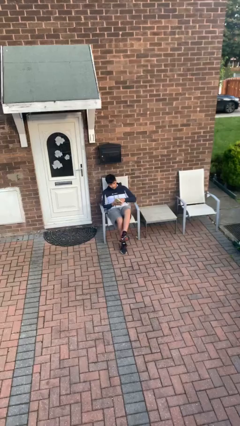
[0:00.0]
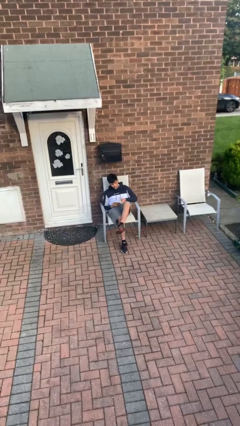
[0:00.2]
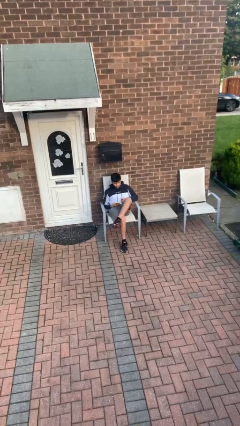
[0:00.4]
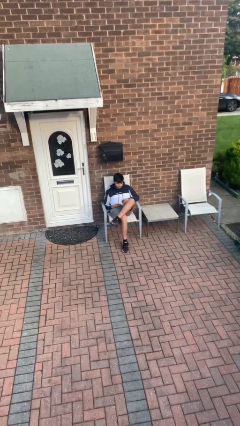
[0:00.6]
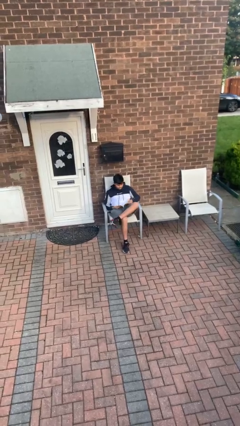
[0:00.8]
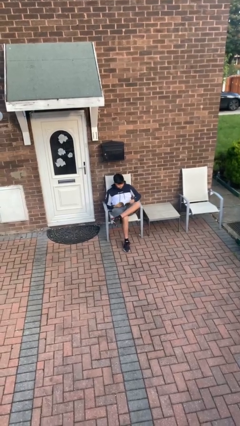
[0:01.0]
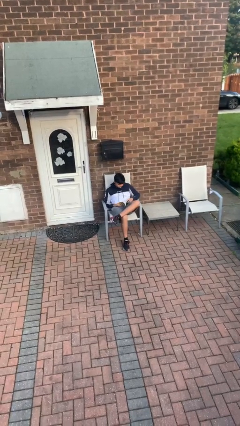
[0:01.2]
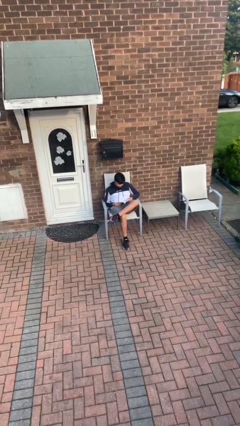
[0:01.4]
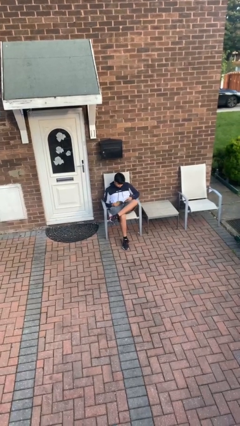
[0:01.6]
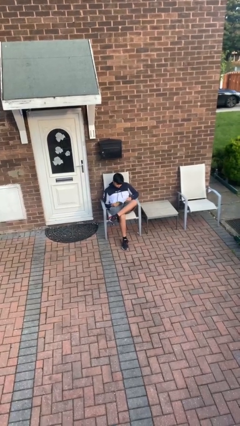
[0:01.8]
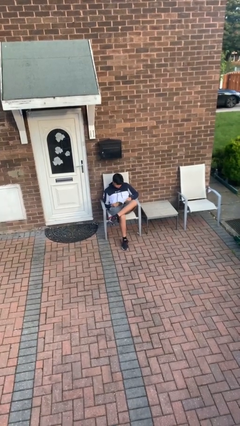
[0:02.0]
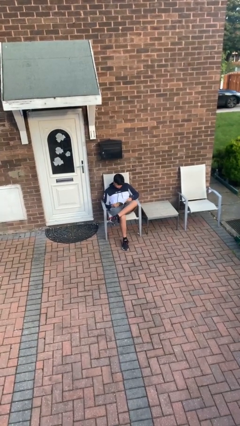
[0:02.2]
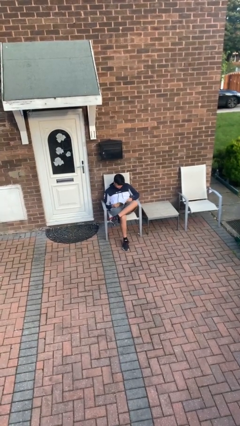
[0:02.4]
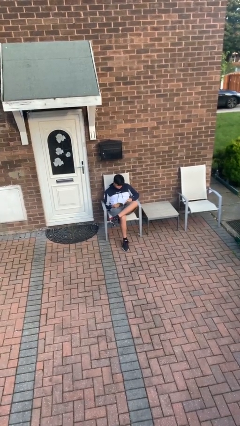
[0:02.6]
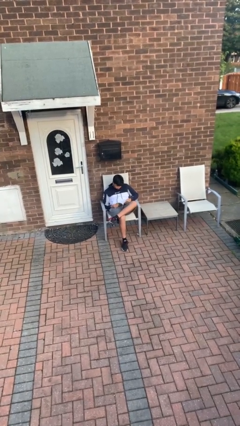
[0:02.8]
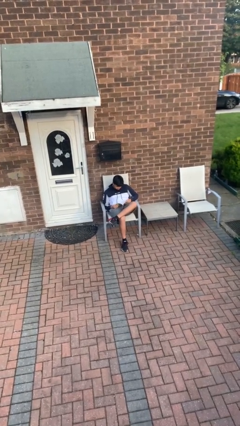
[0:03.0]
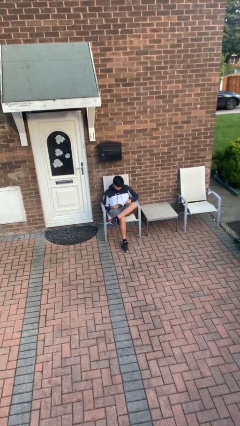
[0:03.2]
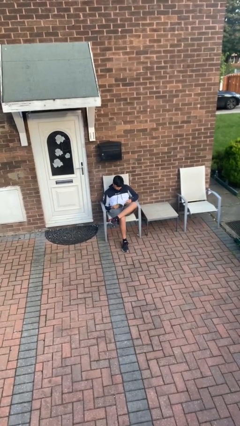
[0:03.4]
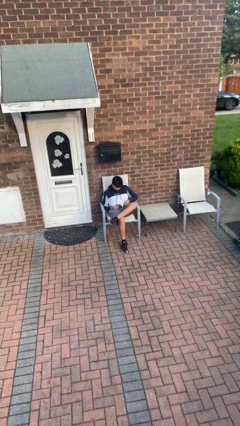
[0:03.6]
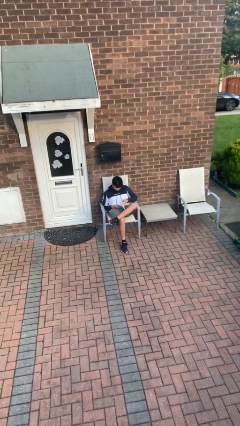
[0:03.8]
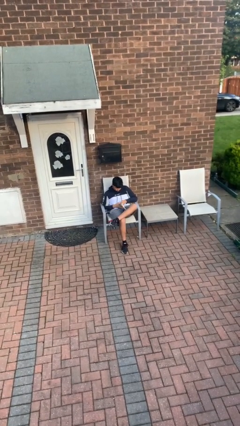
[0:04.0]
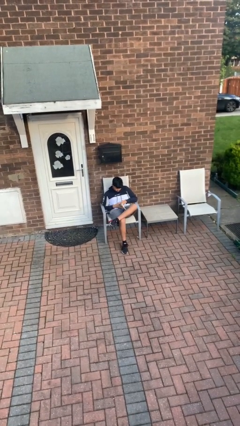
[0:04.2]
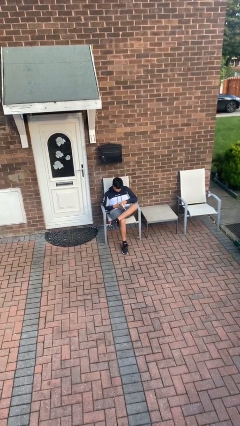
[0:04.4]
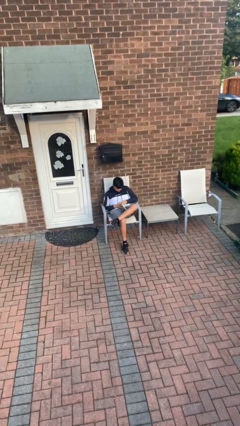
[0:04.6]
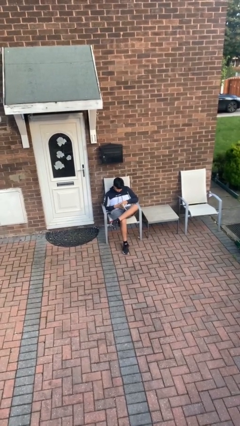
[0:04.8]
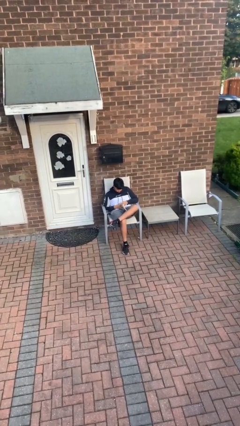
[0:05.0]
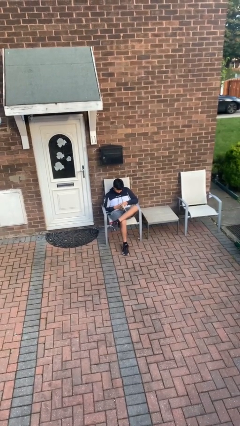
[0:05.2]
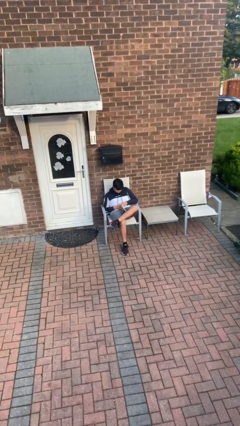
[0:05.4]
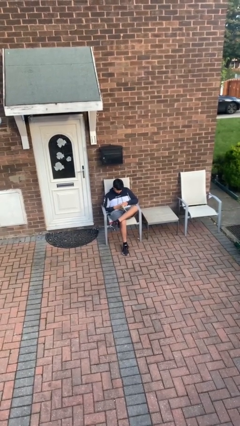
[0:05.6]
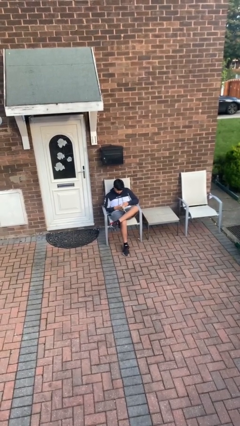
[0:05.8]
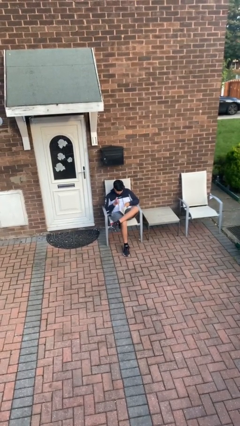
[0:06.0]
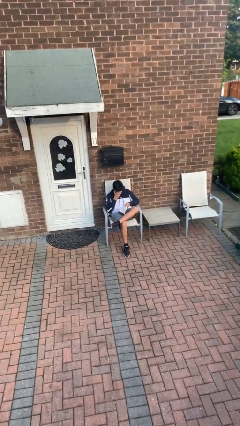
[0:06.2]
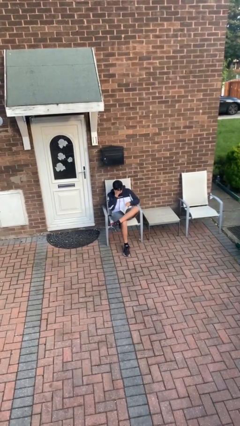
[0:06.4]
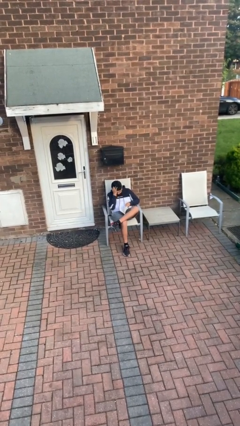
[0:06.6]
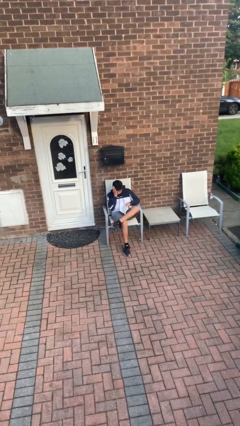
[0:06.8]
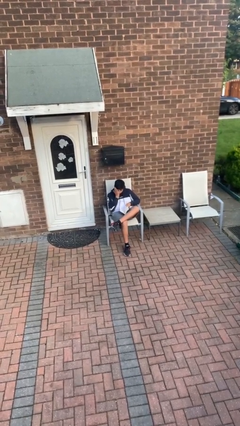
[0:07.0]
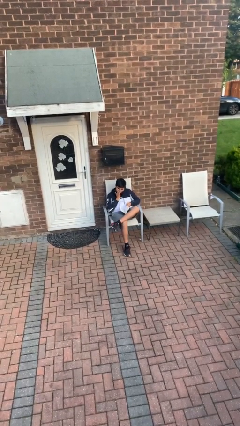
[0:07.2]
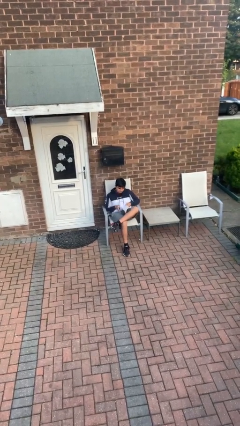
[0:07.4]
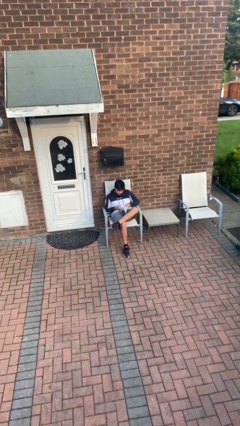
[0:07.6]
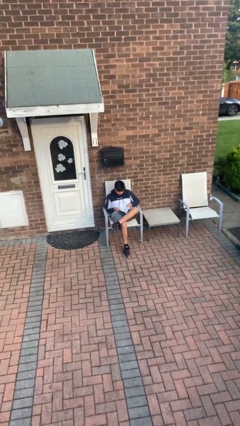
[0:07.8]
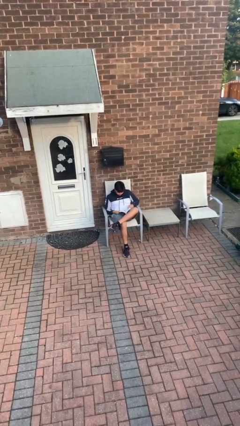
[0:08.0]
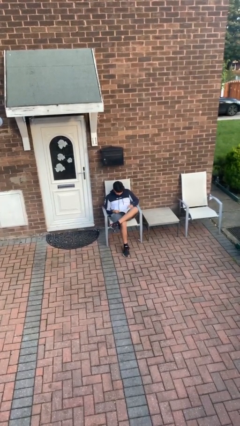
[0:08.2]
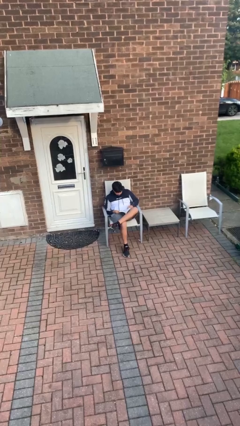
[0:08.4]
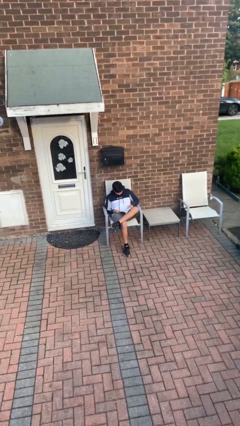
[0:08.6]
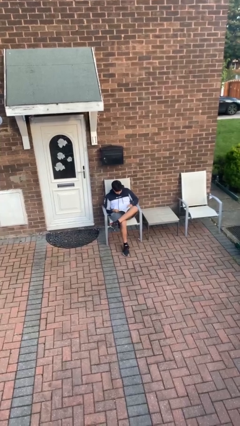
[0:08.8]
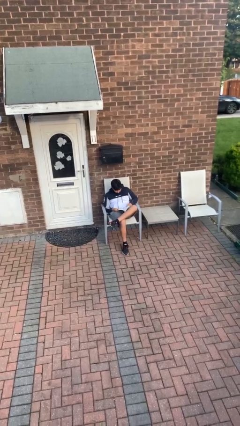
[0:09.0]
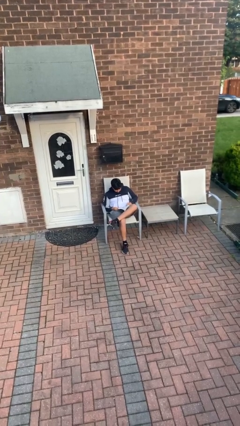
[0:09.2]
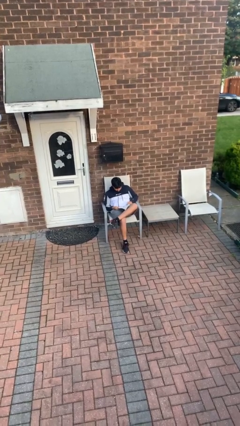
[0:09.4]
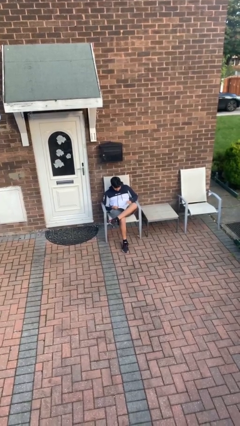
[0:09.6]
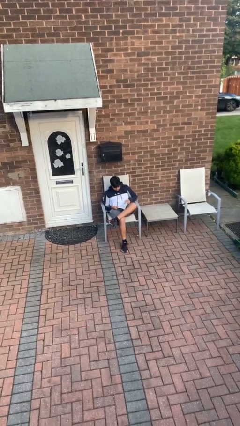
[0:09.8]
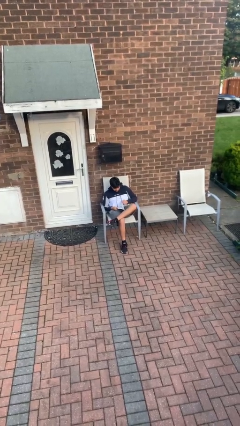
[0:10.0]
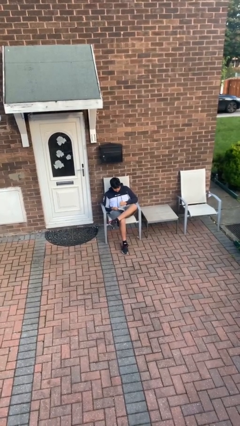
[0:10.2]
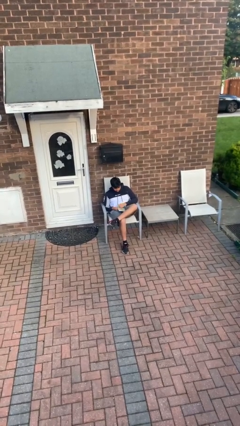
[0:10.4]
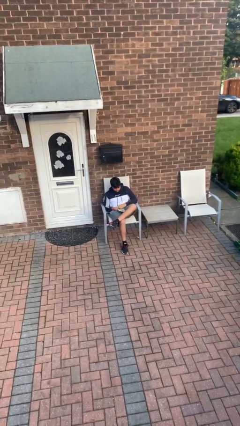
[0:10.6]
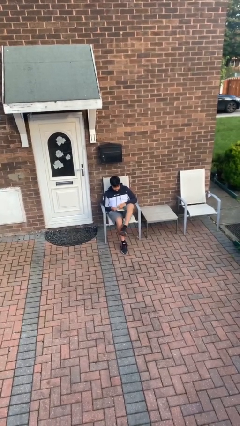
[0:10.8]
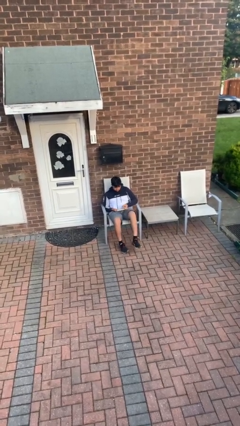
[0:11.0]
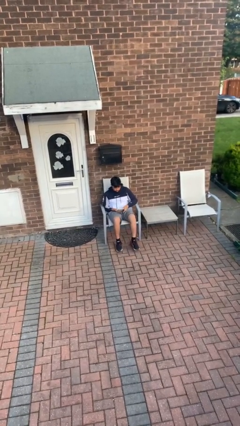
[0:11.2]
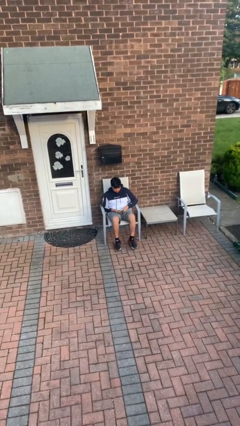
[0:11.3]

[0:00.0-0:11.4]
person reads document

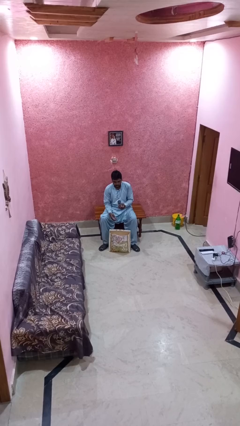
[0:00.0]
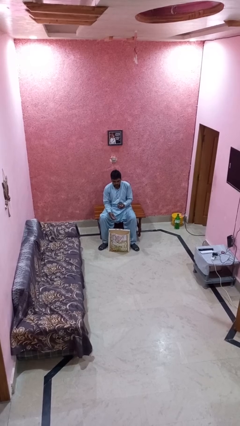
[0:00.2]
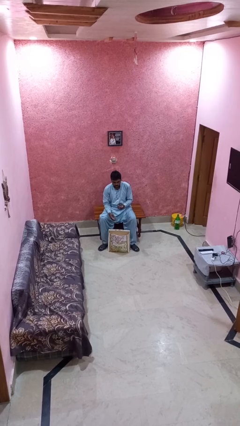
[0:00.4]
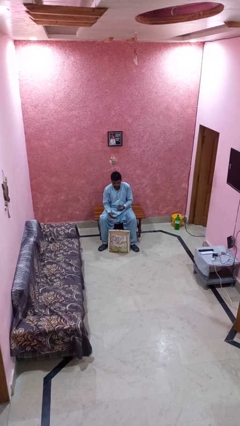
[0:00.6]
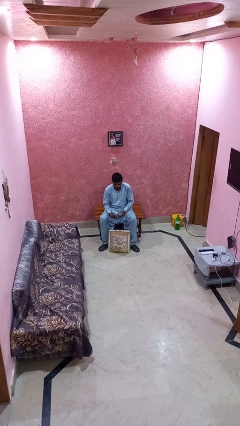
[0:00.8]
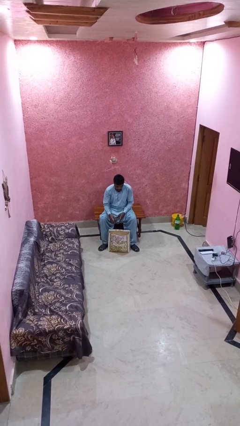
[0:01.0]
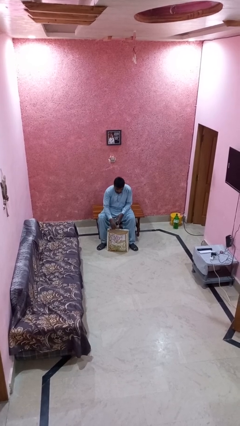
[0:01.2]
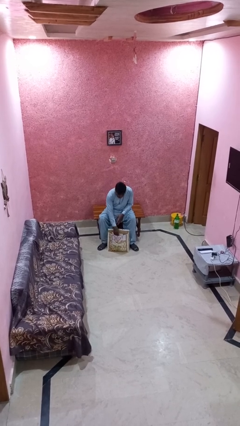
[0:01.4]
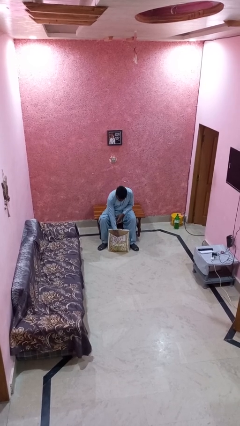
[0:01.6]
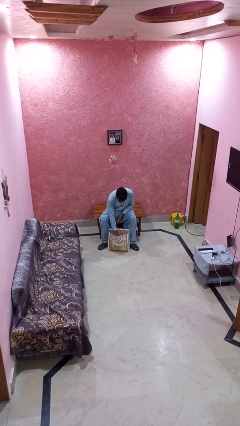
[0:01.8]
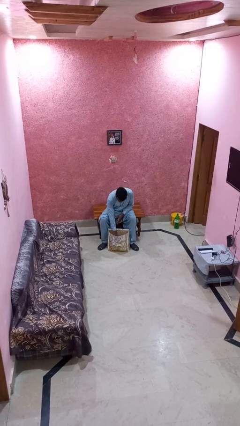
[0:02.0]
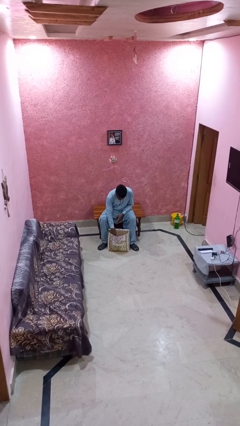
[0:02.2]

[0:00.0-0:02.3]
person puts object into bag

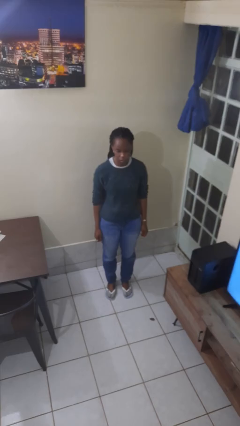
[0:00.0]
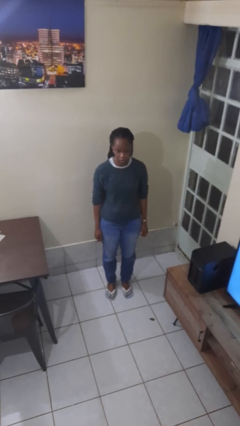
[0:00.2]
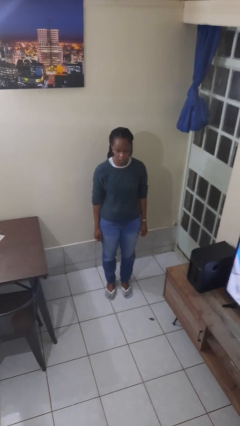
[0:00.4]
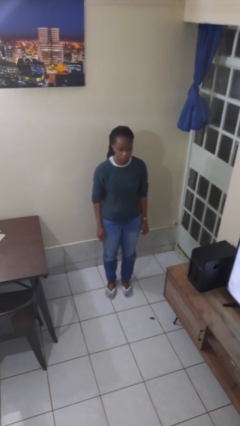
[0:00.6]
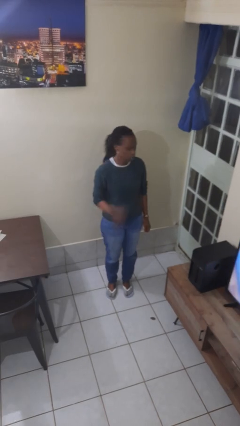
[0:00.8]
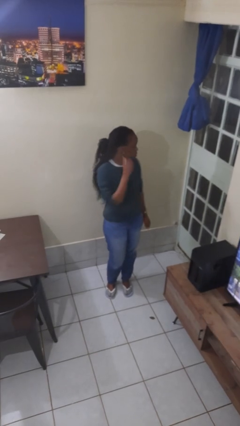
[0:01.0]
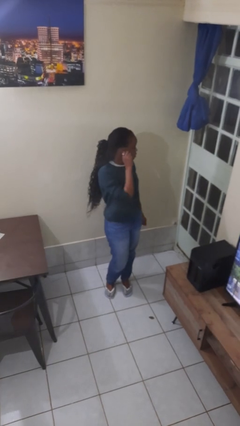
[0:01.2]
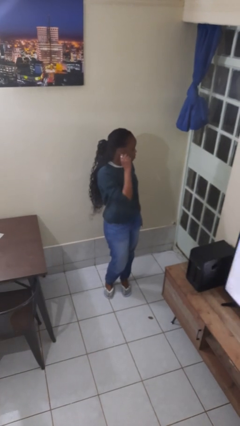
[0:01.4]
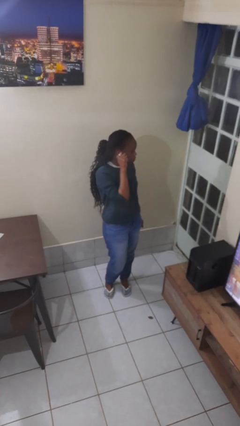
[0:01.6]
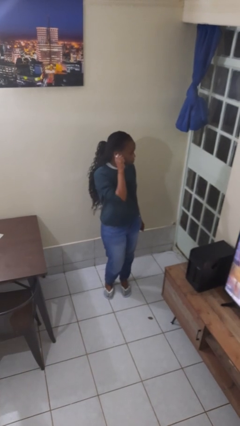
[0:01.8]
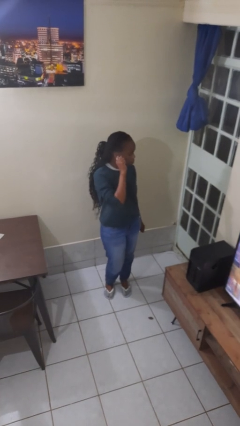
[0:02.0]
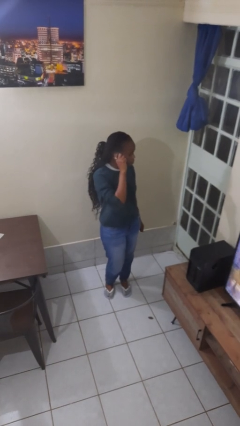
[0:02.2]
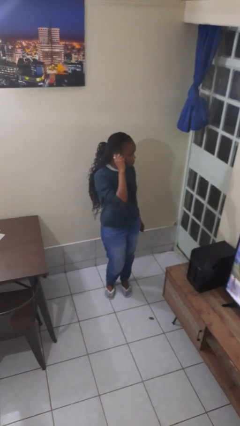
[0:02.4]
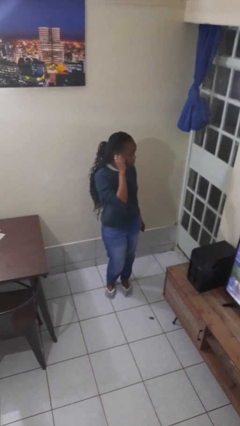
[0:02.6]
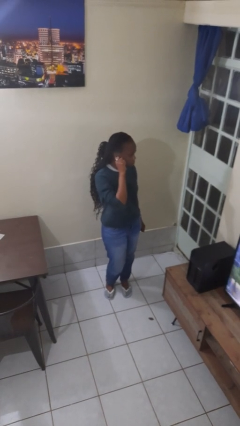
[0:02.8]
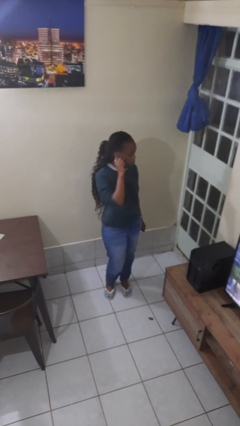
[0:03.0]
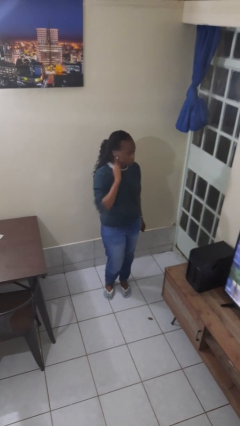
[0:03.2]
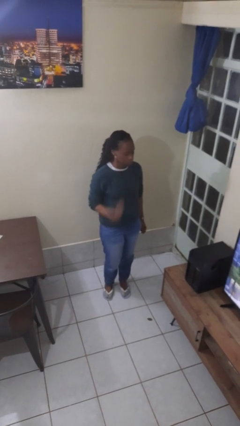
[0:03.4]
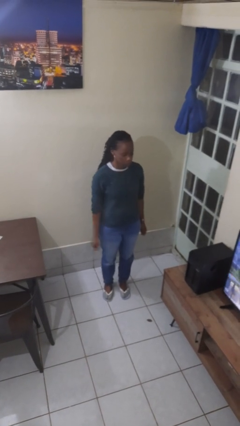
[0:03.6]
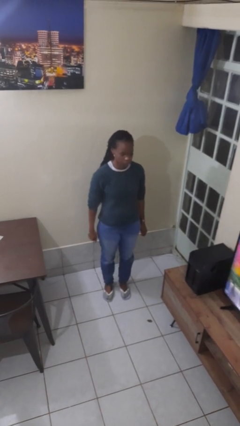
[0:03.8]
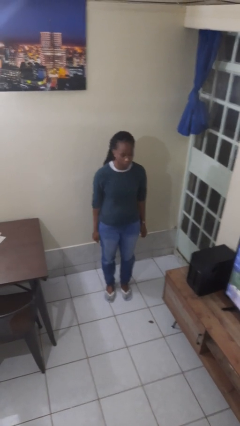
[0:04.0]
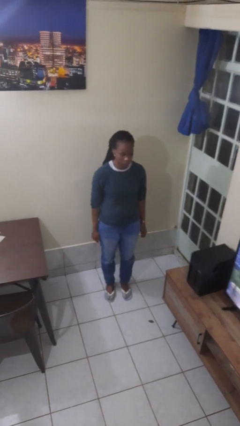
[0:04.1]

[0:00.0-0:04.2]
person touches earlobe
